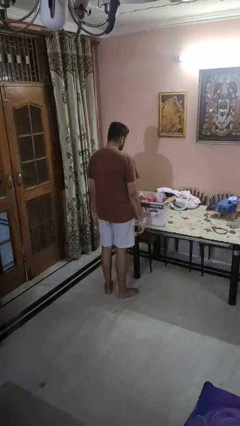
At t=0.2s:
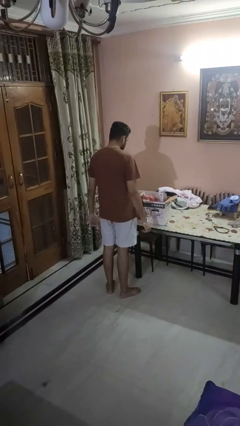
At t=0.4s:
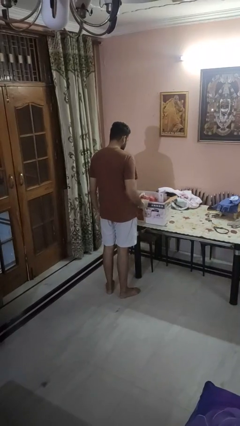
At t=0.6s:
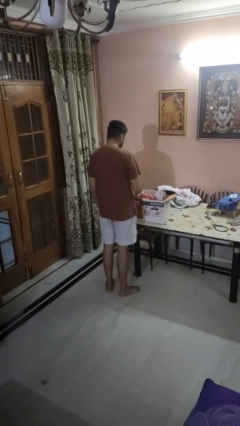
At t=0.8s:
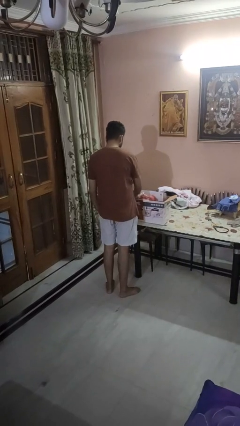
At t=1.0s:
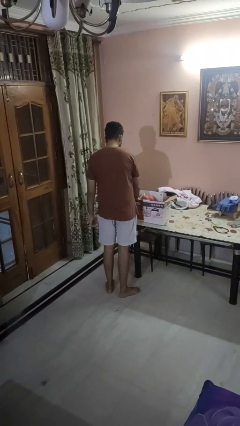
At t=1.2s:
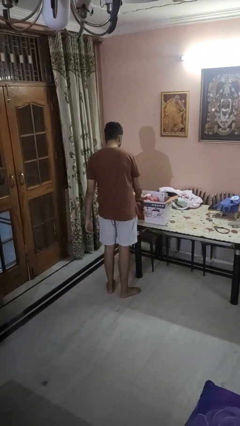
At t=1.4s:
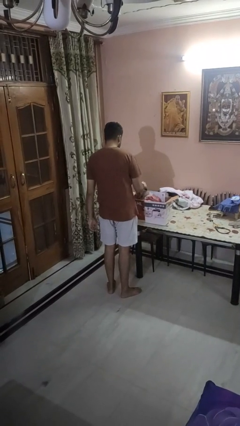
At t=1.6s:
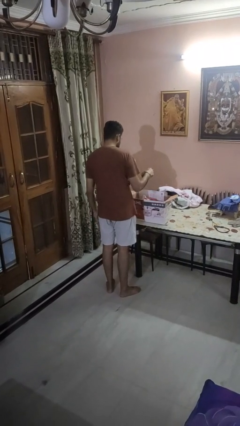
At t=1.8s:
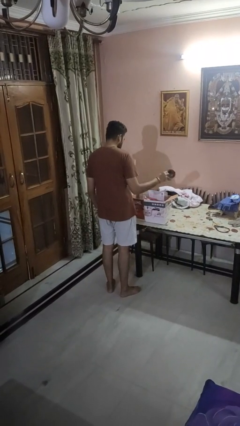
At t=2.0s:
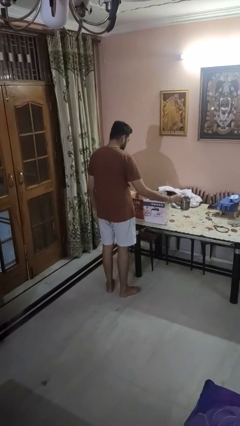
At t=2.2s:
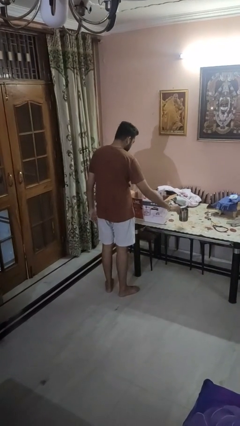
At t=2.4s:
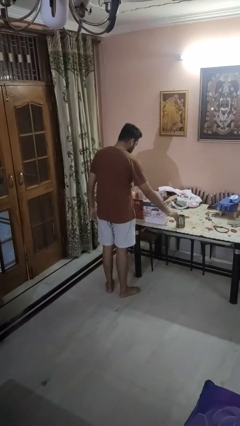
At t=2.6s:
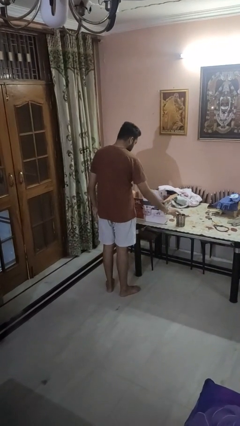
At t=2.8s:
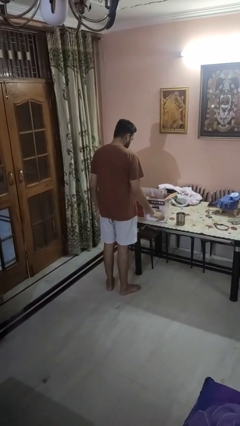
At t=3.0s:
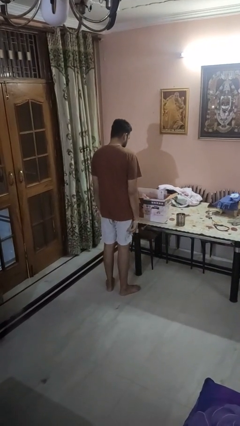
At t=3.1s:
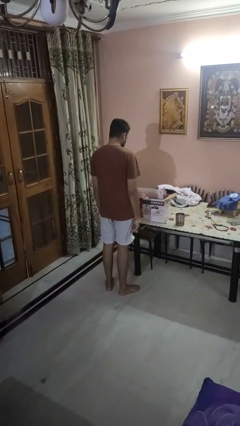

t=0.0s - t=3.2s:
person takes object from box

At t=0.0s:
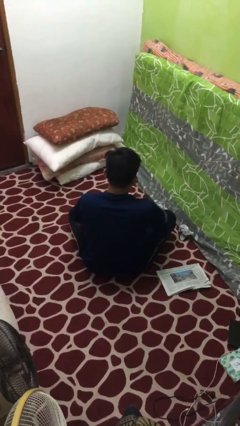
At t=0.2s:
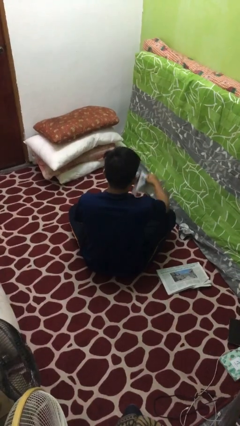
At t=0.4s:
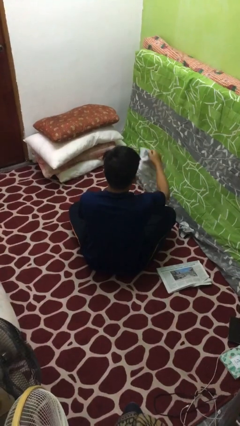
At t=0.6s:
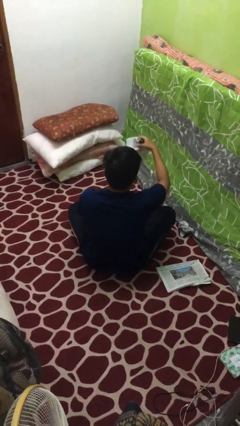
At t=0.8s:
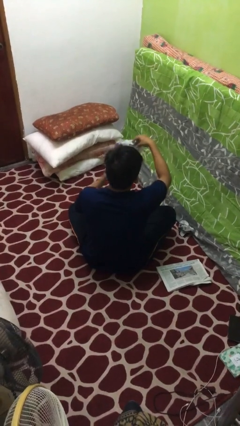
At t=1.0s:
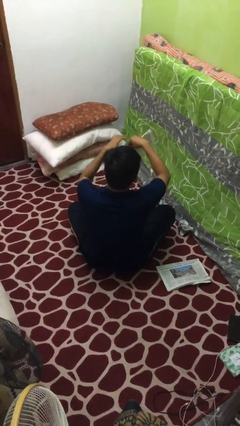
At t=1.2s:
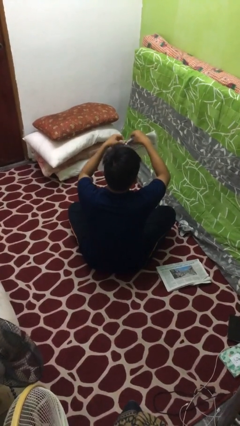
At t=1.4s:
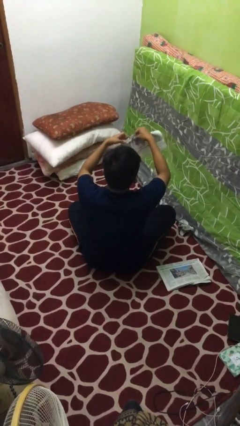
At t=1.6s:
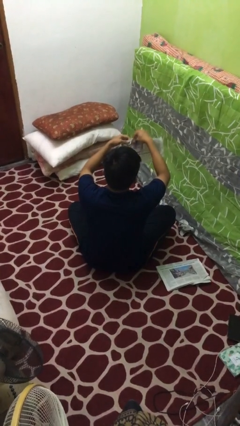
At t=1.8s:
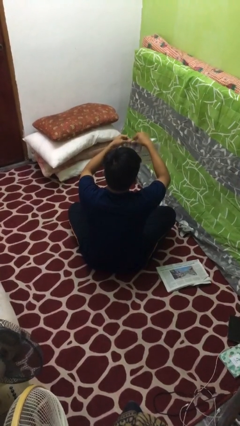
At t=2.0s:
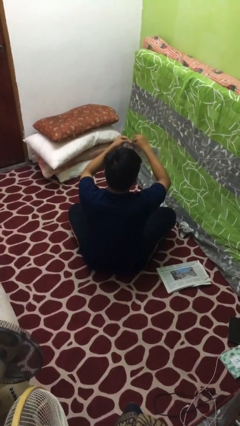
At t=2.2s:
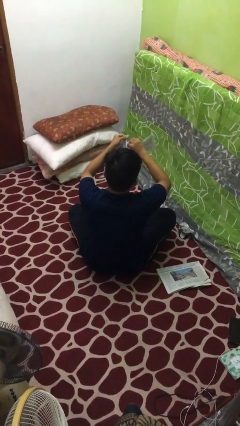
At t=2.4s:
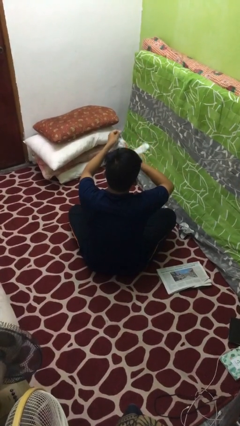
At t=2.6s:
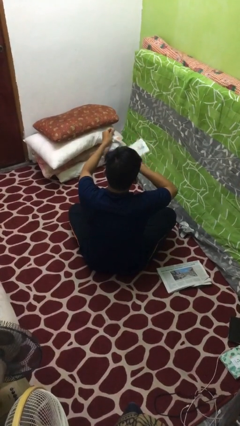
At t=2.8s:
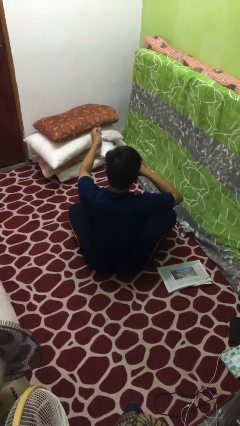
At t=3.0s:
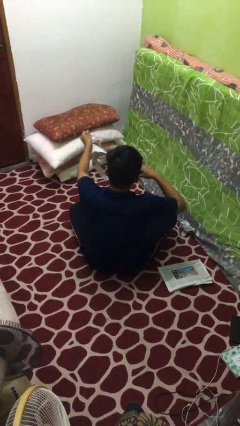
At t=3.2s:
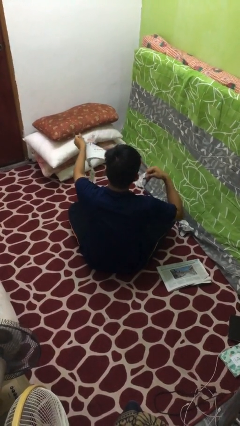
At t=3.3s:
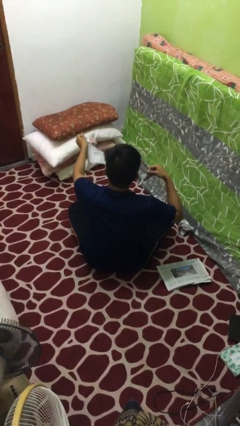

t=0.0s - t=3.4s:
person tears paper

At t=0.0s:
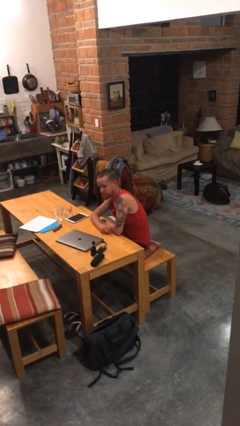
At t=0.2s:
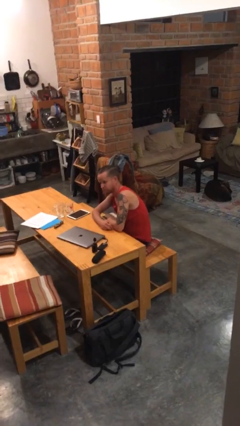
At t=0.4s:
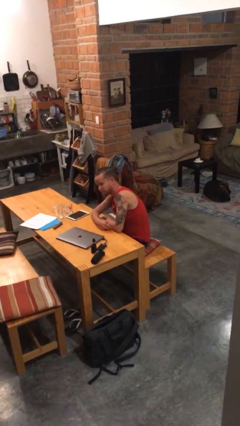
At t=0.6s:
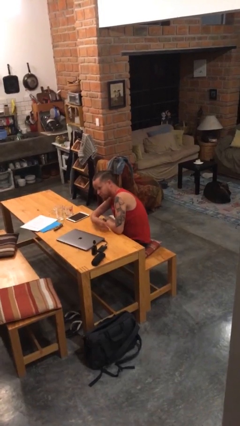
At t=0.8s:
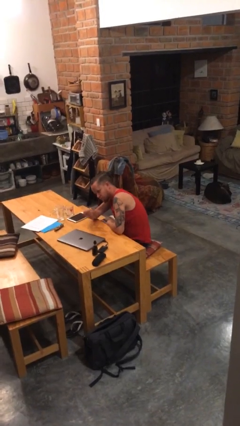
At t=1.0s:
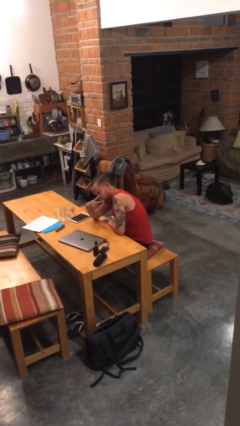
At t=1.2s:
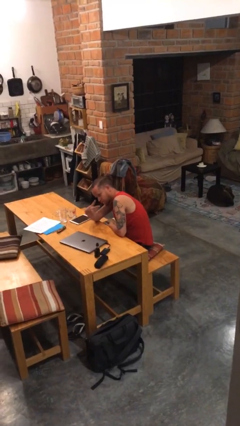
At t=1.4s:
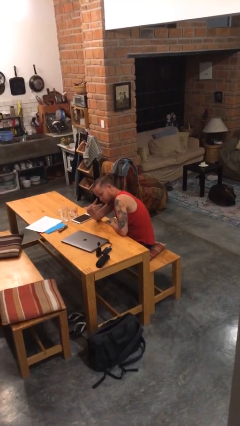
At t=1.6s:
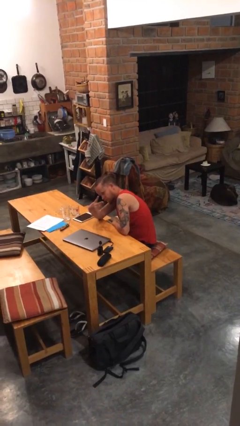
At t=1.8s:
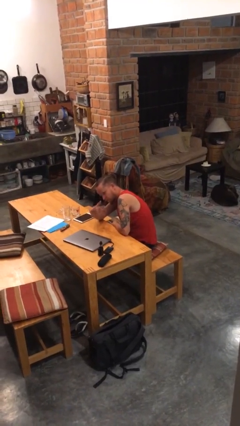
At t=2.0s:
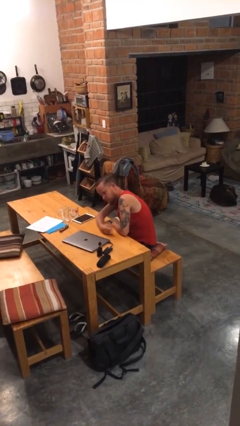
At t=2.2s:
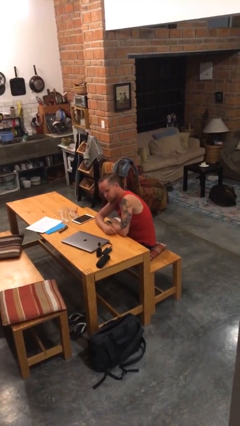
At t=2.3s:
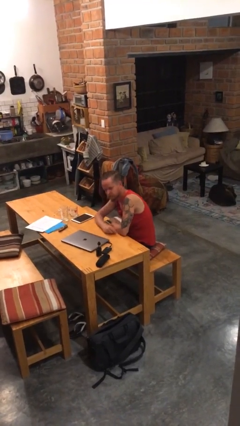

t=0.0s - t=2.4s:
person gestures peace

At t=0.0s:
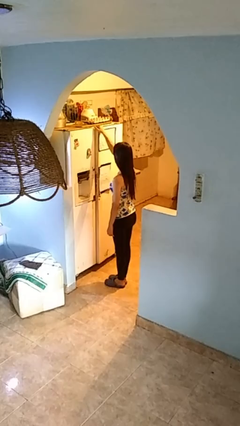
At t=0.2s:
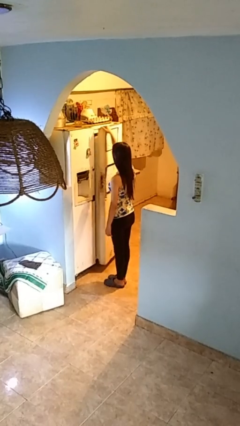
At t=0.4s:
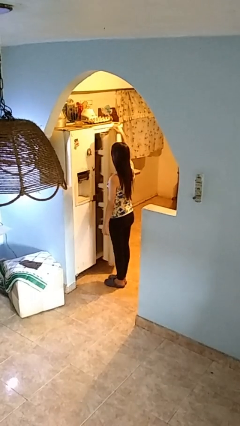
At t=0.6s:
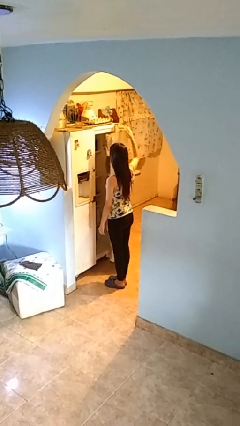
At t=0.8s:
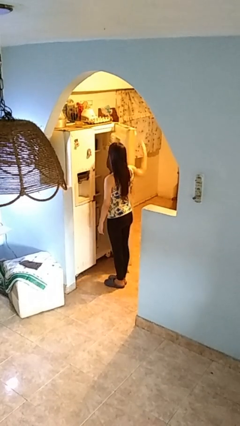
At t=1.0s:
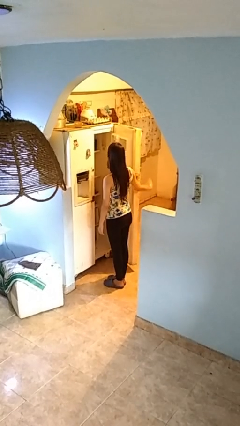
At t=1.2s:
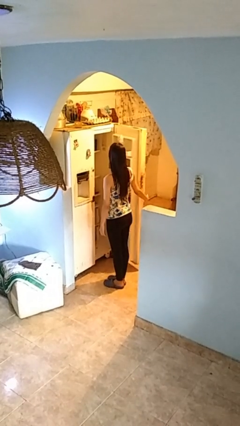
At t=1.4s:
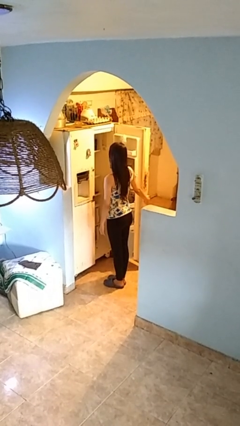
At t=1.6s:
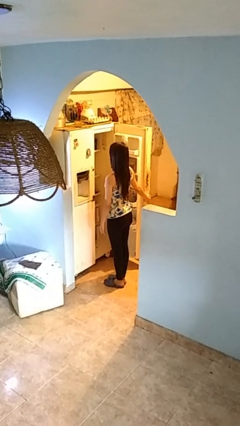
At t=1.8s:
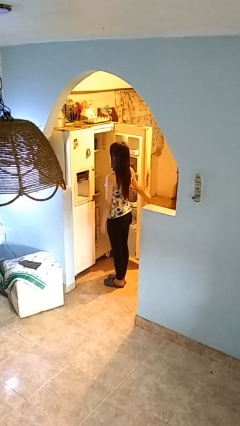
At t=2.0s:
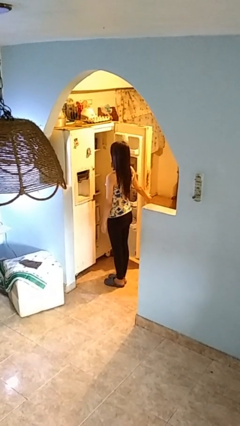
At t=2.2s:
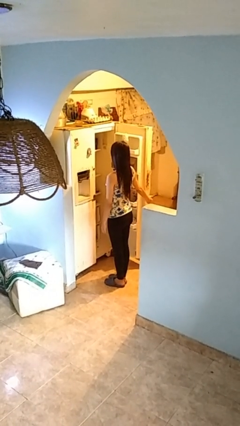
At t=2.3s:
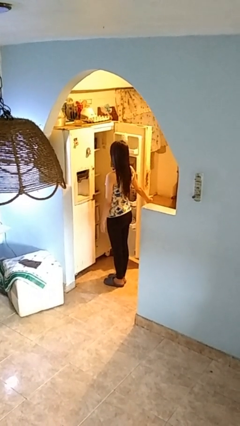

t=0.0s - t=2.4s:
person opens refrigerator

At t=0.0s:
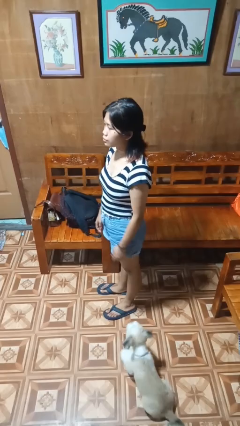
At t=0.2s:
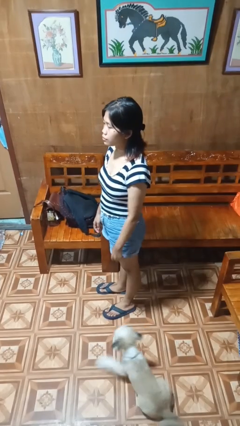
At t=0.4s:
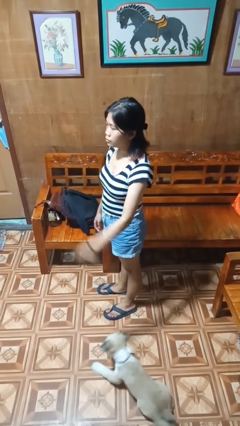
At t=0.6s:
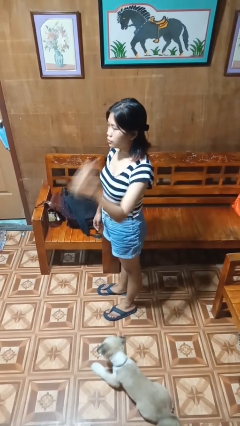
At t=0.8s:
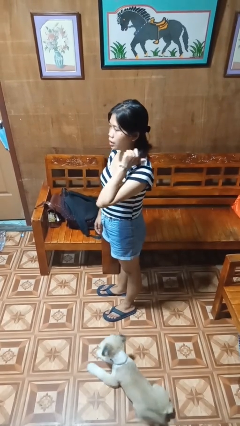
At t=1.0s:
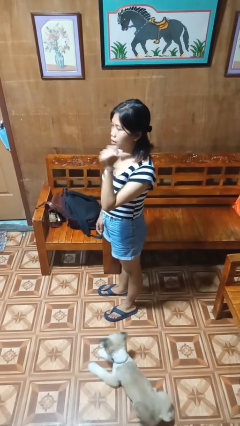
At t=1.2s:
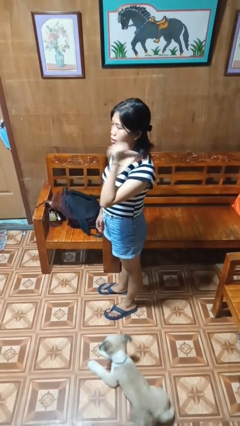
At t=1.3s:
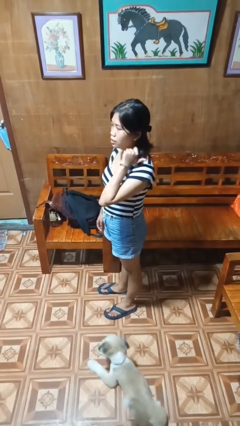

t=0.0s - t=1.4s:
person gestures behind me

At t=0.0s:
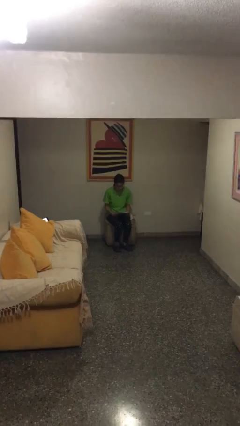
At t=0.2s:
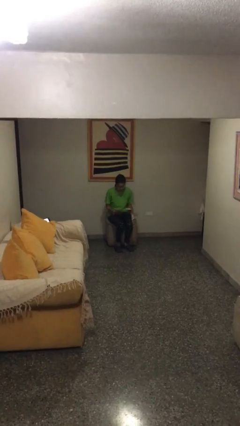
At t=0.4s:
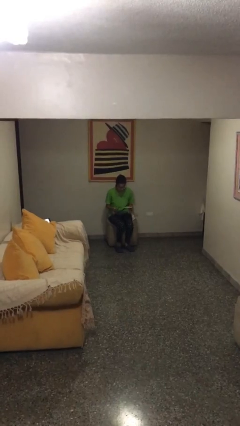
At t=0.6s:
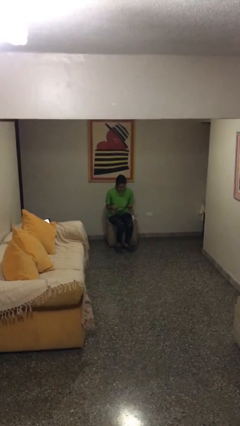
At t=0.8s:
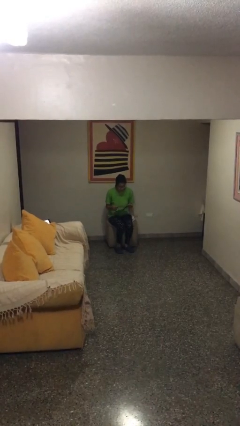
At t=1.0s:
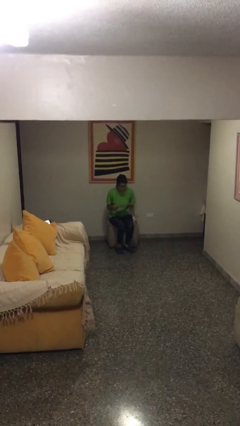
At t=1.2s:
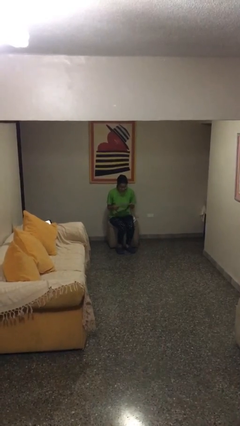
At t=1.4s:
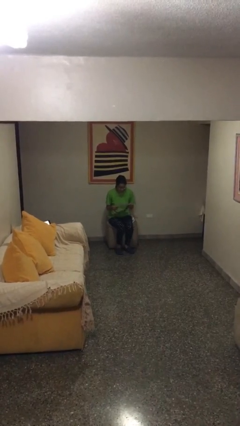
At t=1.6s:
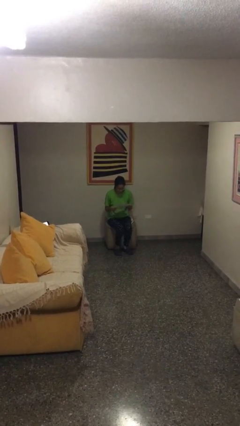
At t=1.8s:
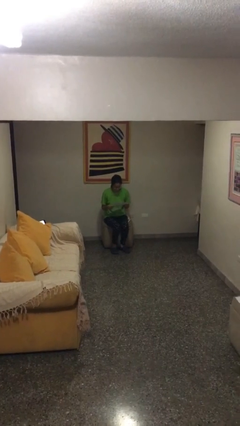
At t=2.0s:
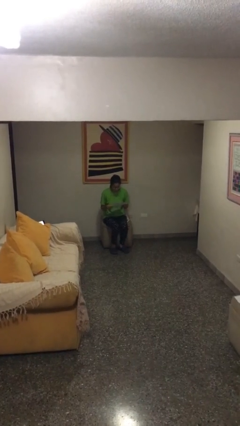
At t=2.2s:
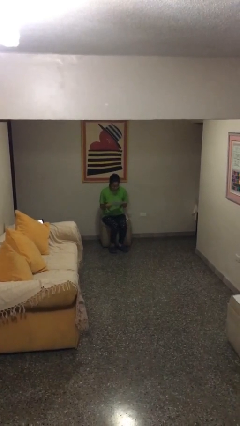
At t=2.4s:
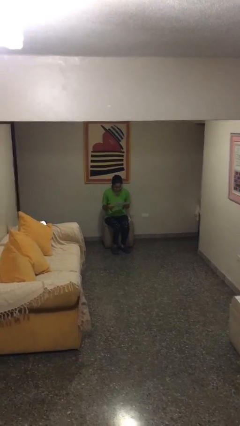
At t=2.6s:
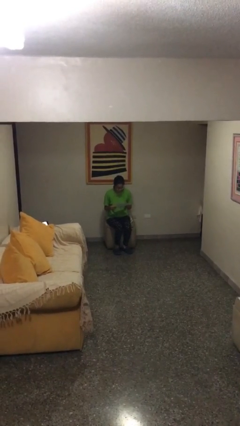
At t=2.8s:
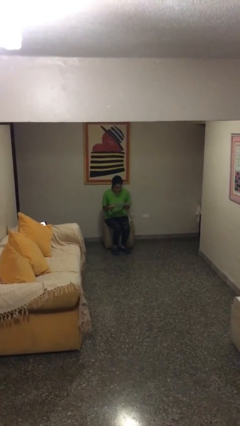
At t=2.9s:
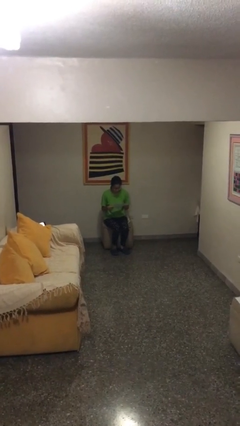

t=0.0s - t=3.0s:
person reads document

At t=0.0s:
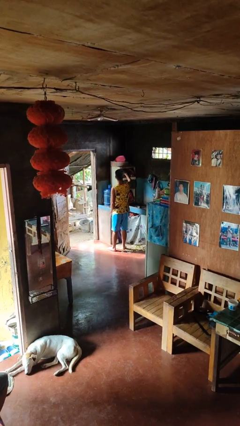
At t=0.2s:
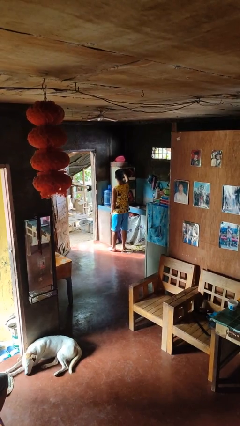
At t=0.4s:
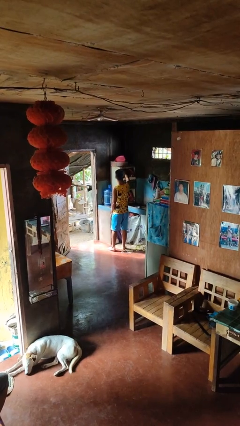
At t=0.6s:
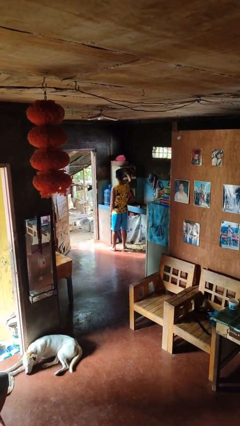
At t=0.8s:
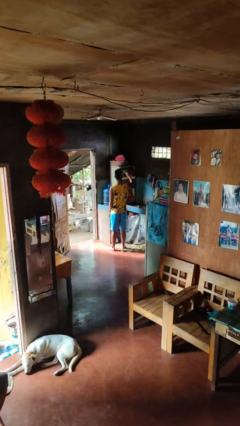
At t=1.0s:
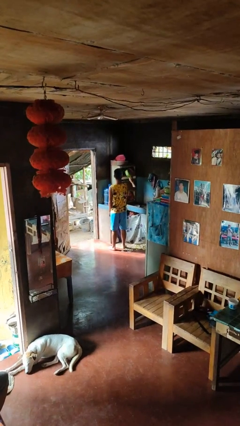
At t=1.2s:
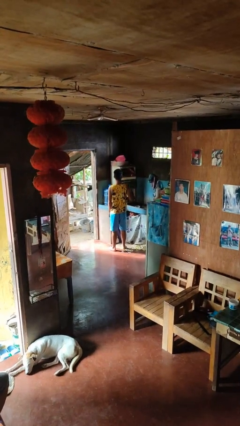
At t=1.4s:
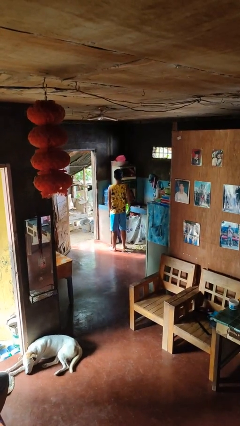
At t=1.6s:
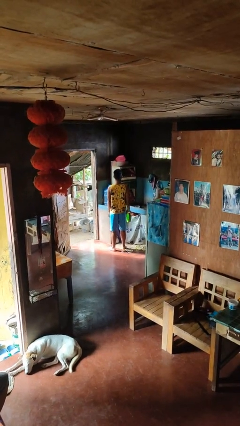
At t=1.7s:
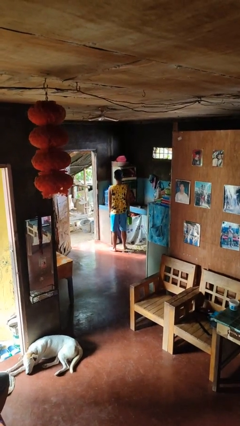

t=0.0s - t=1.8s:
person takes object from cabinet
